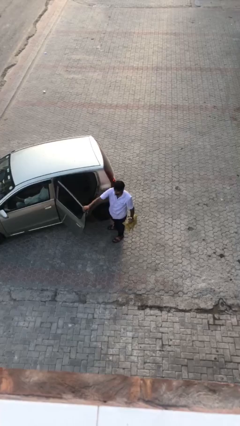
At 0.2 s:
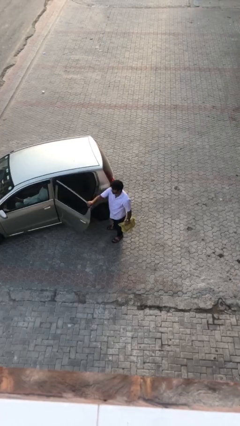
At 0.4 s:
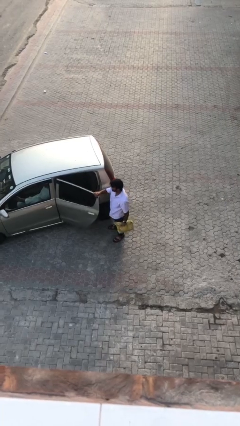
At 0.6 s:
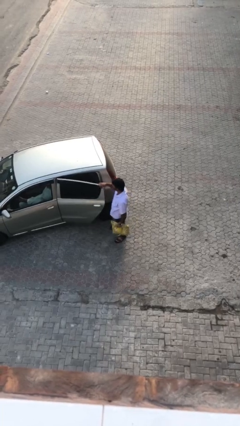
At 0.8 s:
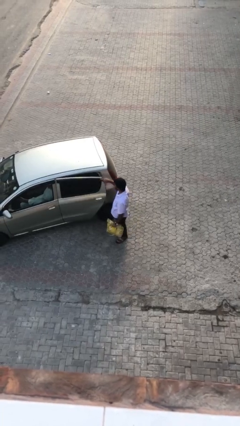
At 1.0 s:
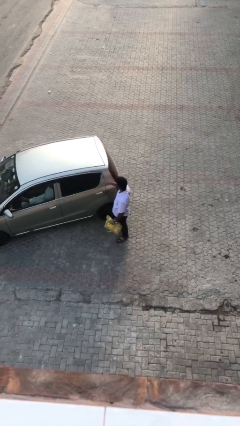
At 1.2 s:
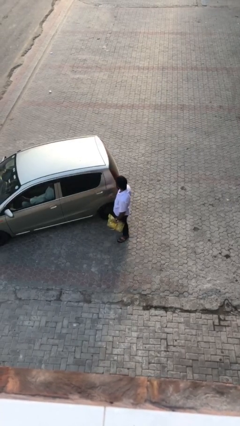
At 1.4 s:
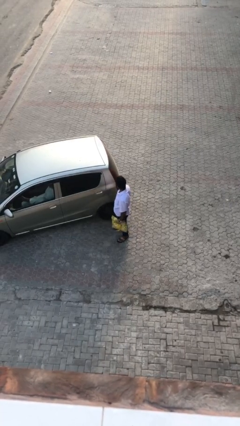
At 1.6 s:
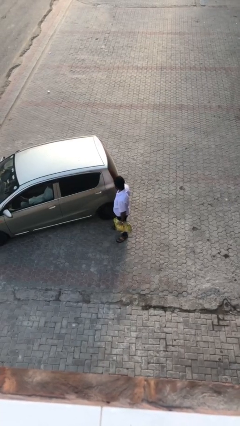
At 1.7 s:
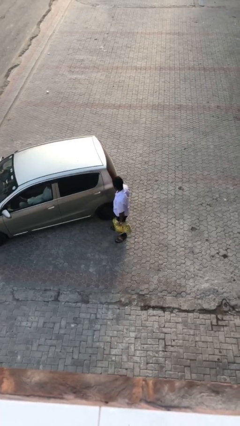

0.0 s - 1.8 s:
person closes car door

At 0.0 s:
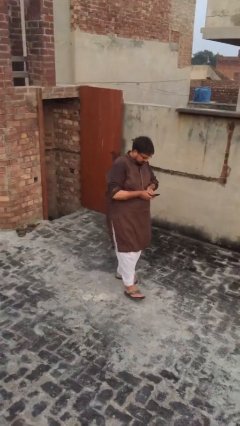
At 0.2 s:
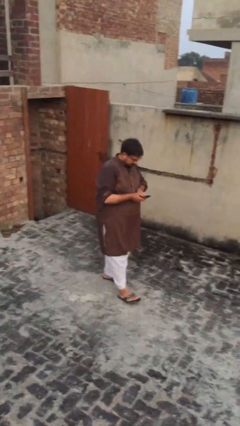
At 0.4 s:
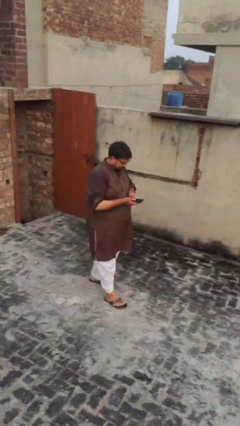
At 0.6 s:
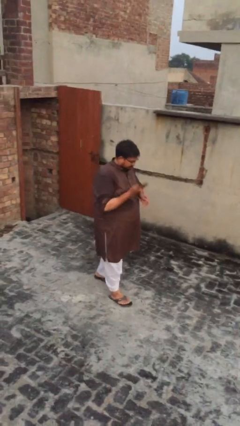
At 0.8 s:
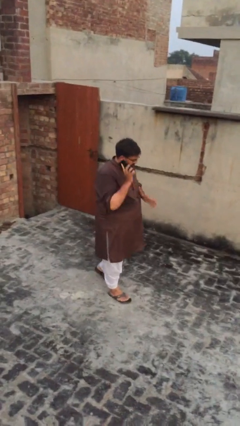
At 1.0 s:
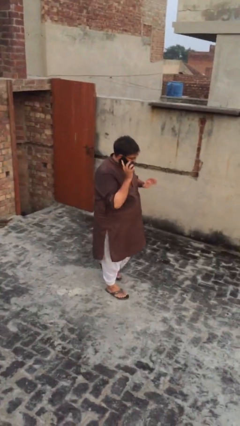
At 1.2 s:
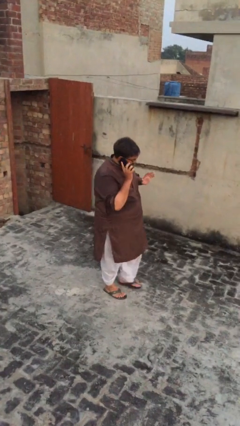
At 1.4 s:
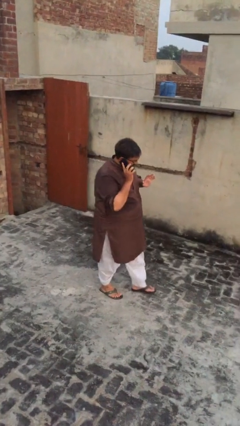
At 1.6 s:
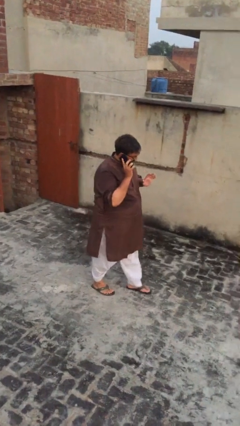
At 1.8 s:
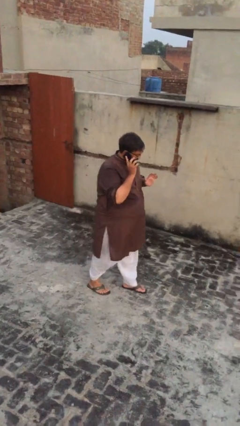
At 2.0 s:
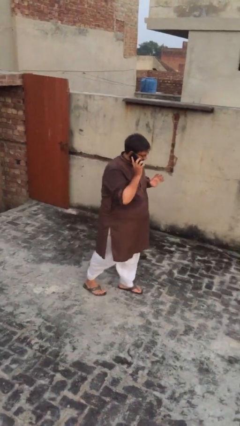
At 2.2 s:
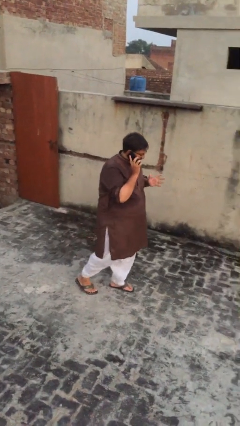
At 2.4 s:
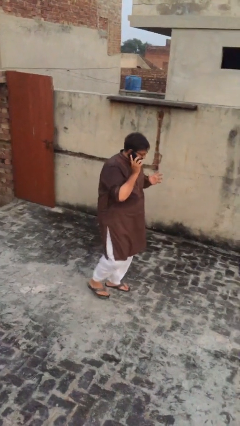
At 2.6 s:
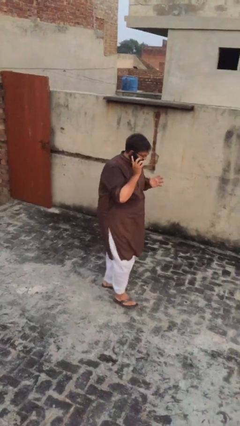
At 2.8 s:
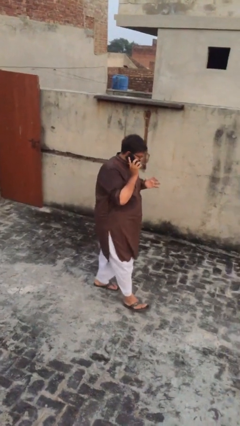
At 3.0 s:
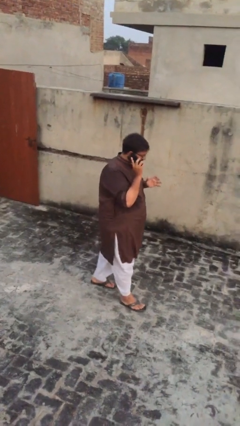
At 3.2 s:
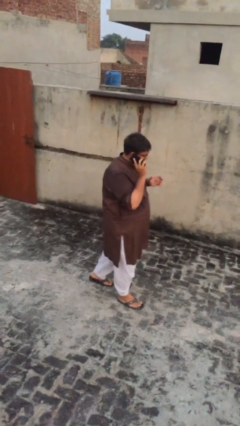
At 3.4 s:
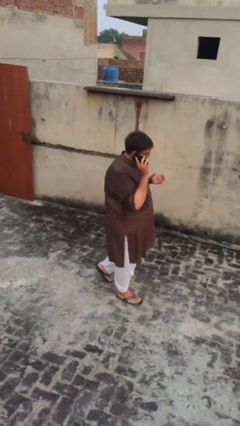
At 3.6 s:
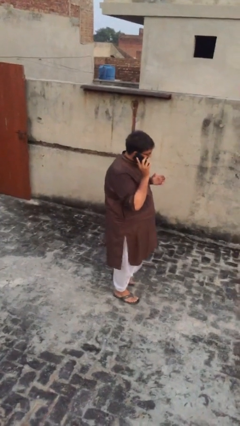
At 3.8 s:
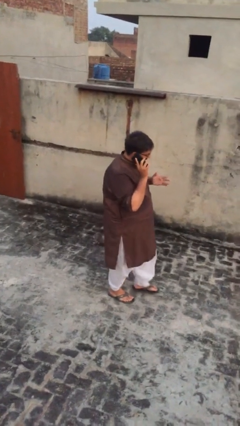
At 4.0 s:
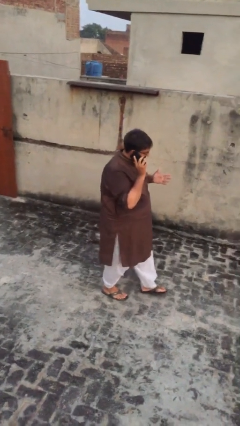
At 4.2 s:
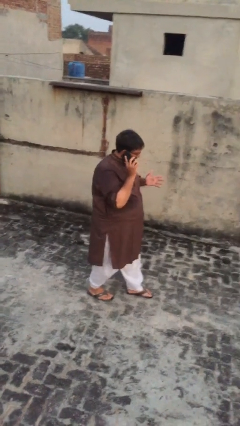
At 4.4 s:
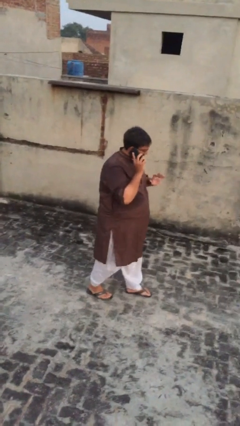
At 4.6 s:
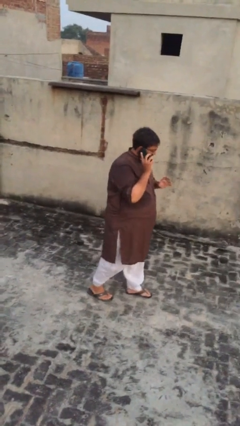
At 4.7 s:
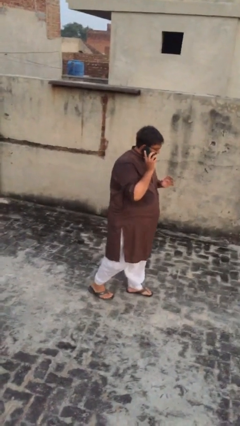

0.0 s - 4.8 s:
person talks on phone

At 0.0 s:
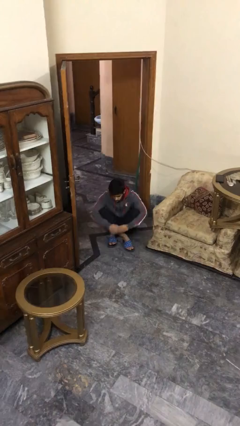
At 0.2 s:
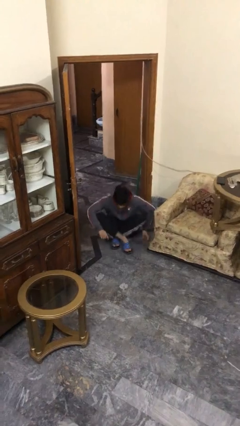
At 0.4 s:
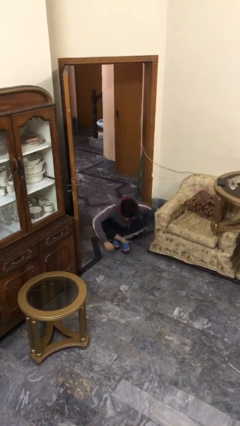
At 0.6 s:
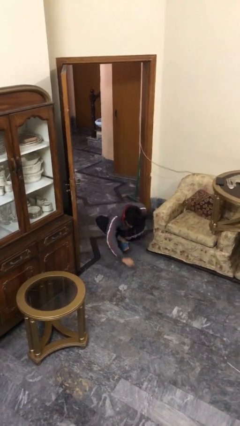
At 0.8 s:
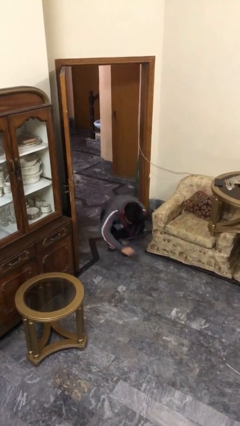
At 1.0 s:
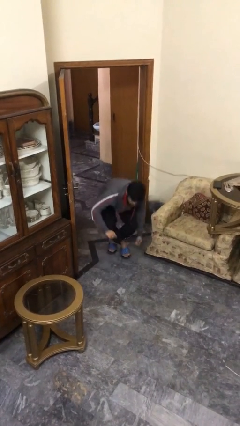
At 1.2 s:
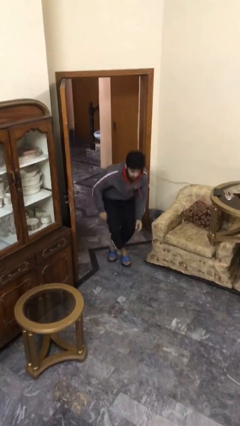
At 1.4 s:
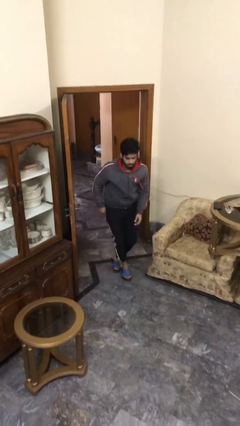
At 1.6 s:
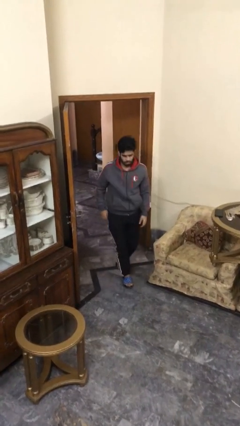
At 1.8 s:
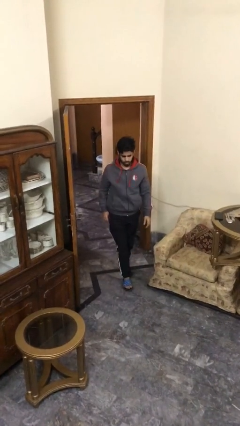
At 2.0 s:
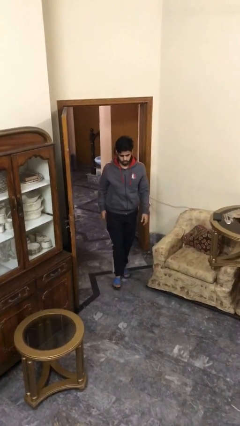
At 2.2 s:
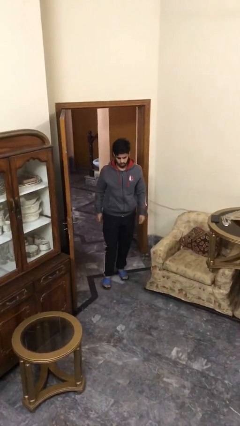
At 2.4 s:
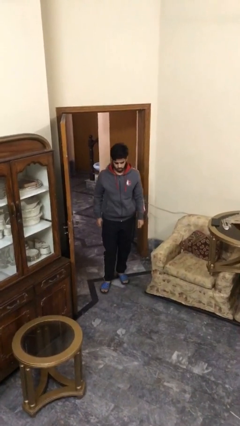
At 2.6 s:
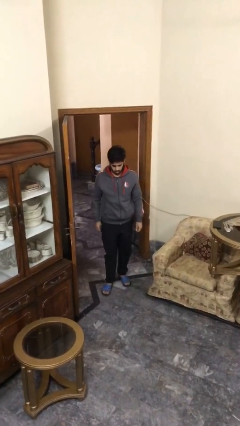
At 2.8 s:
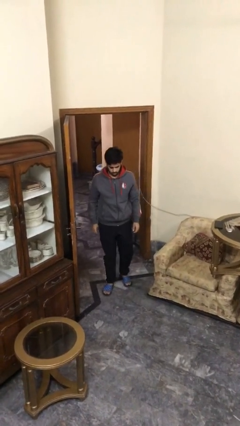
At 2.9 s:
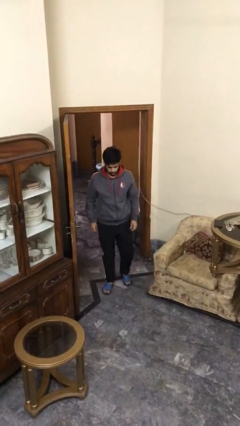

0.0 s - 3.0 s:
person stands up

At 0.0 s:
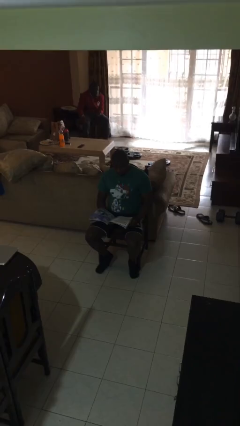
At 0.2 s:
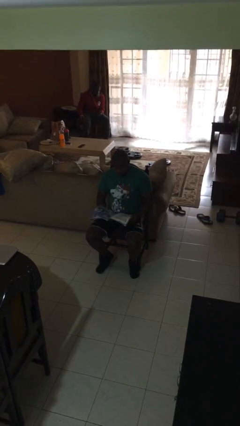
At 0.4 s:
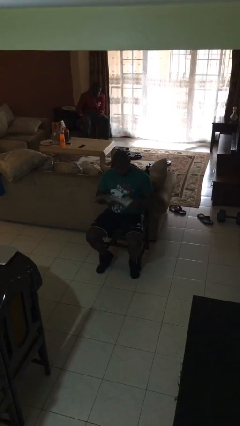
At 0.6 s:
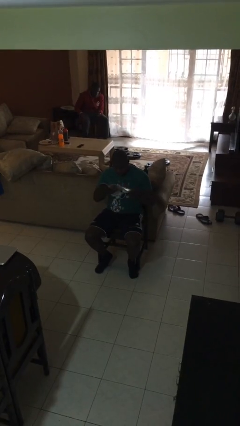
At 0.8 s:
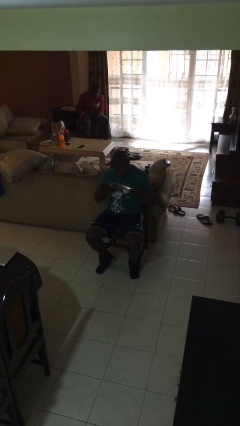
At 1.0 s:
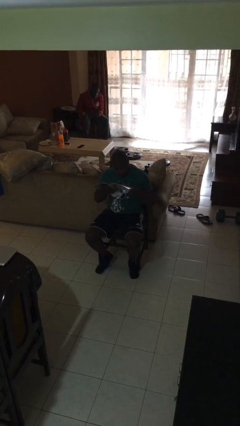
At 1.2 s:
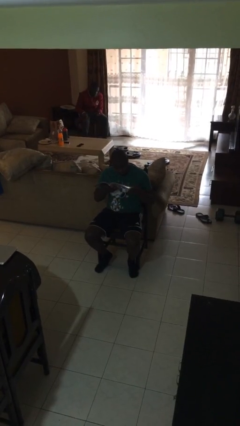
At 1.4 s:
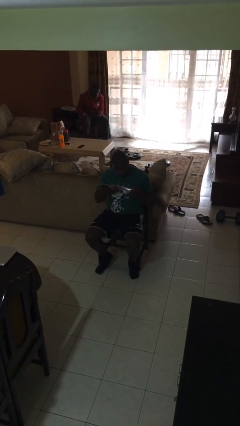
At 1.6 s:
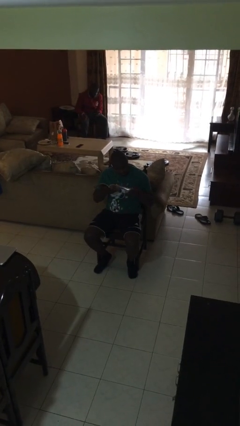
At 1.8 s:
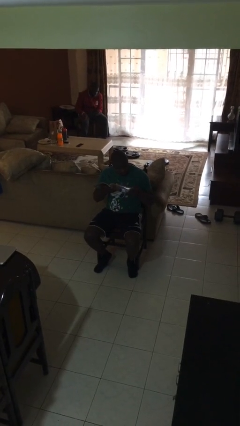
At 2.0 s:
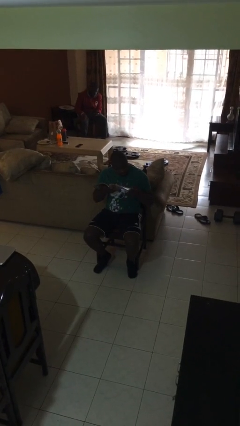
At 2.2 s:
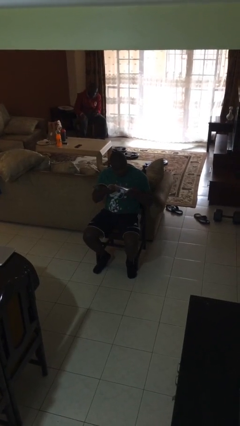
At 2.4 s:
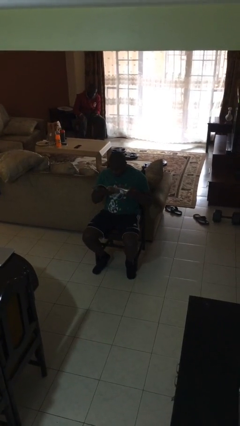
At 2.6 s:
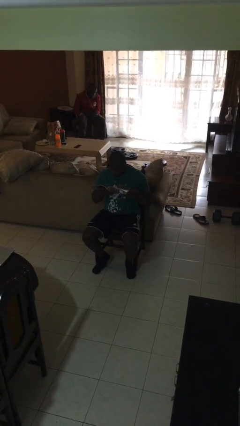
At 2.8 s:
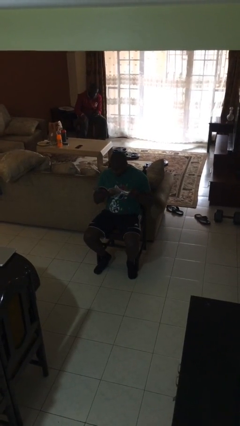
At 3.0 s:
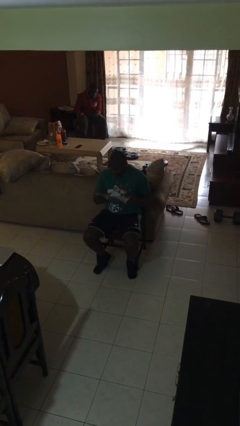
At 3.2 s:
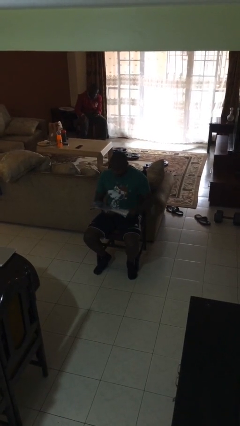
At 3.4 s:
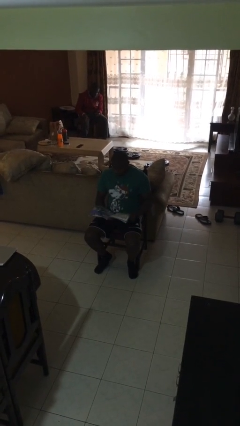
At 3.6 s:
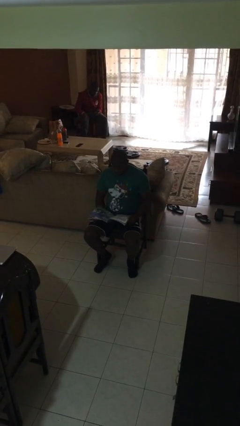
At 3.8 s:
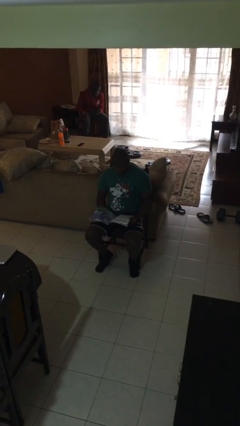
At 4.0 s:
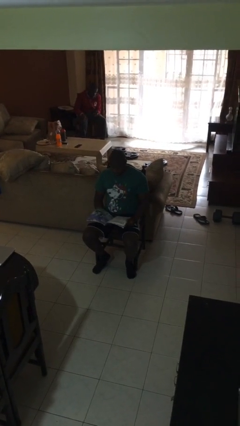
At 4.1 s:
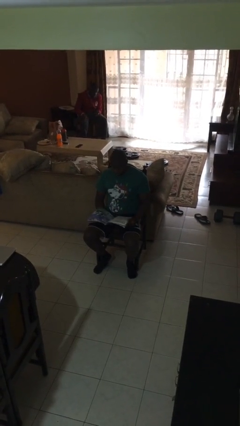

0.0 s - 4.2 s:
person reads document

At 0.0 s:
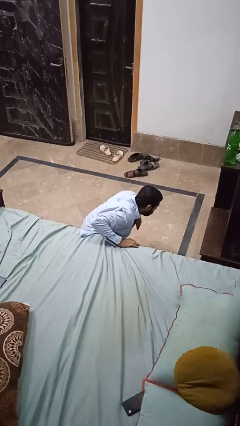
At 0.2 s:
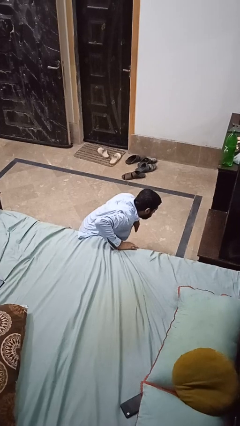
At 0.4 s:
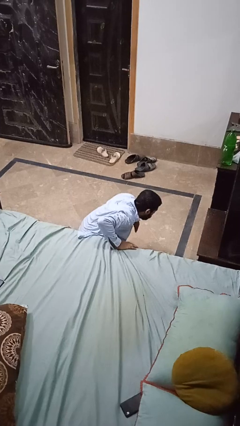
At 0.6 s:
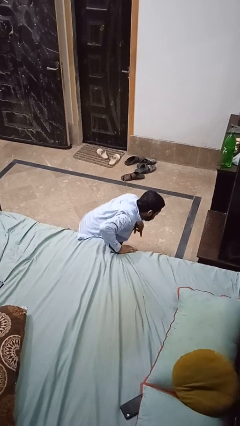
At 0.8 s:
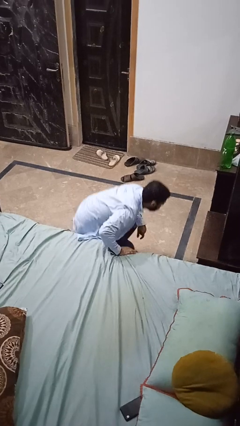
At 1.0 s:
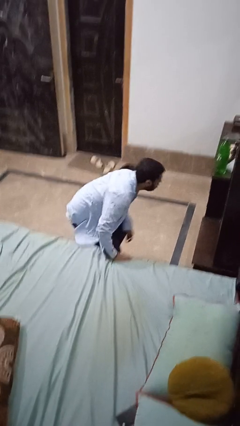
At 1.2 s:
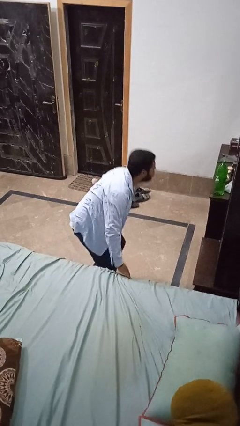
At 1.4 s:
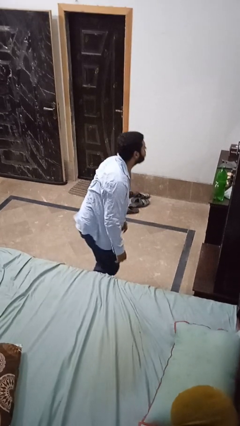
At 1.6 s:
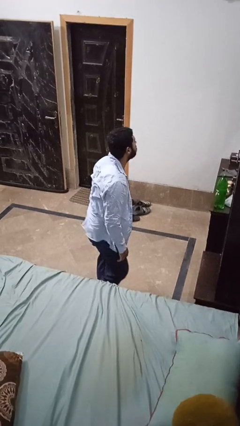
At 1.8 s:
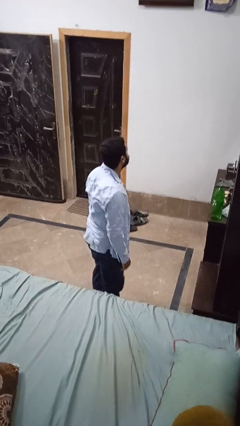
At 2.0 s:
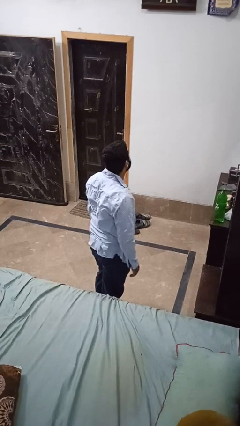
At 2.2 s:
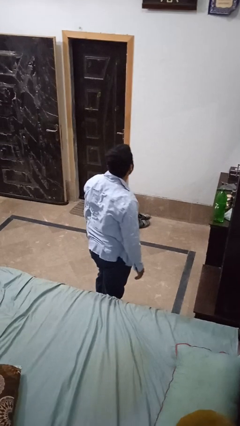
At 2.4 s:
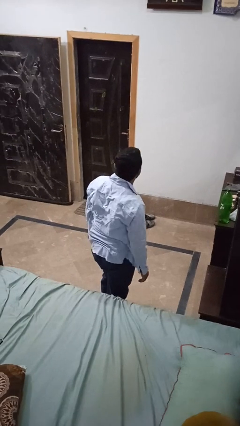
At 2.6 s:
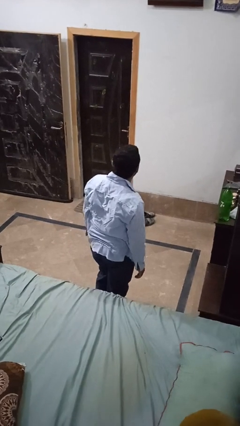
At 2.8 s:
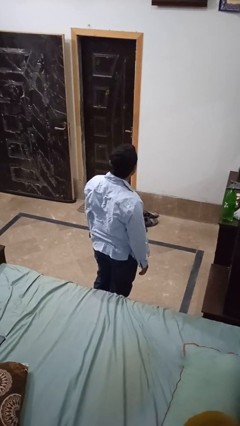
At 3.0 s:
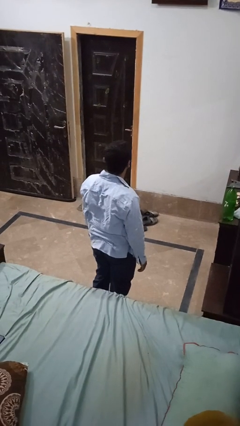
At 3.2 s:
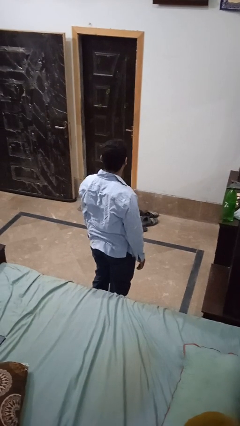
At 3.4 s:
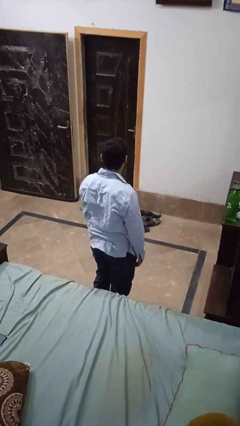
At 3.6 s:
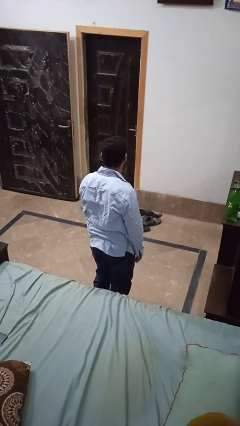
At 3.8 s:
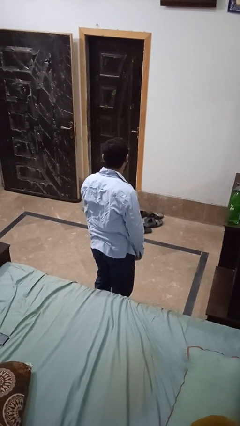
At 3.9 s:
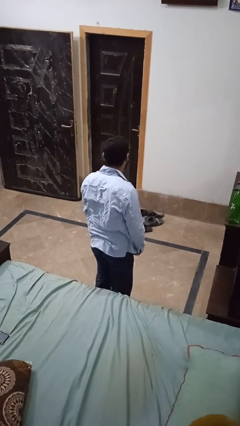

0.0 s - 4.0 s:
person stands up from floor
